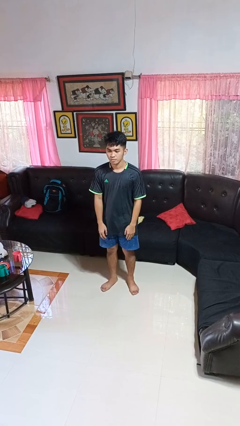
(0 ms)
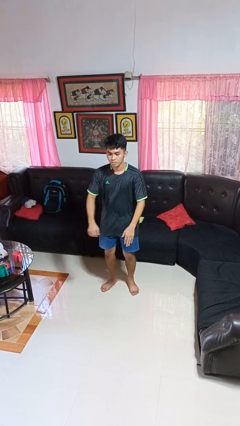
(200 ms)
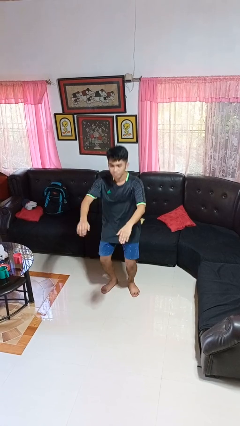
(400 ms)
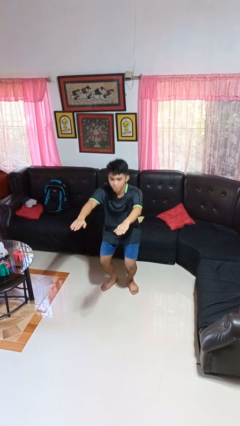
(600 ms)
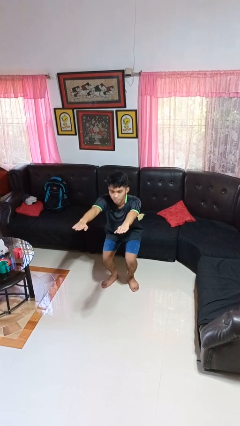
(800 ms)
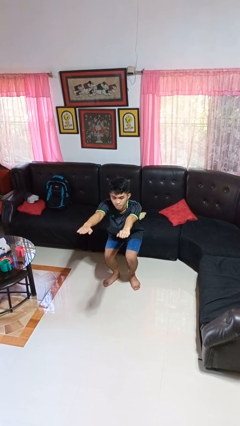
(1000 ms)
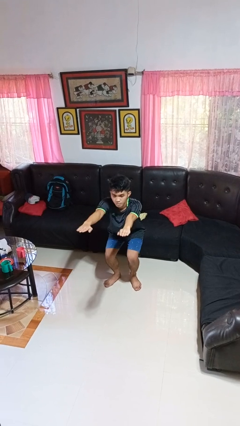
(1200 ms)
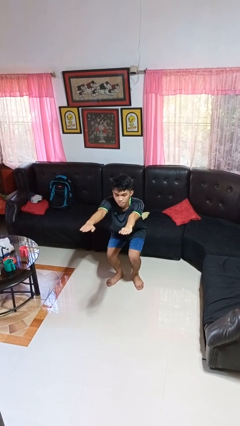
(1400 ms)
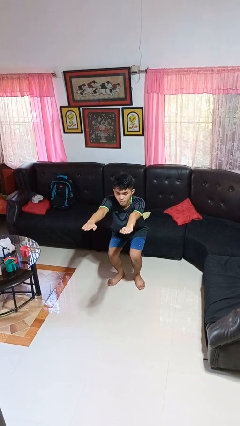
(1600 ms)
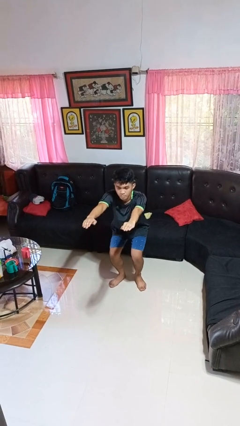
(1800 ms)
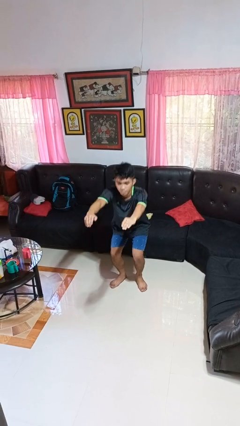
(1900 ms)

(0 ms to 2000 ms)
person squats

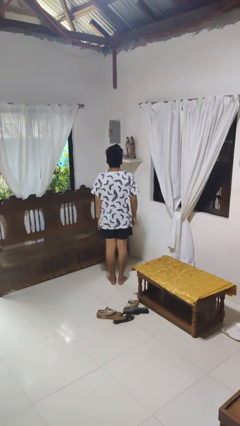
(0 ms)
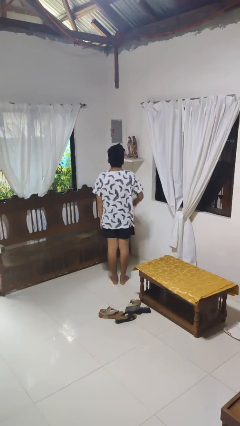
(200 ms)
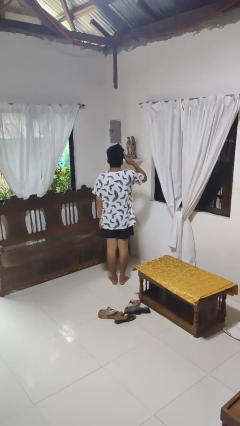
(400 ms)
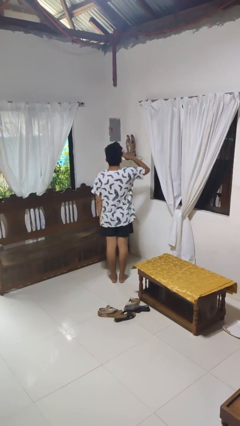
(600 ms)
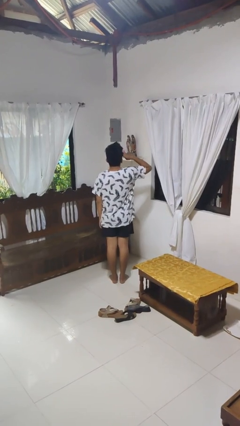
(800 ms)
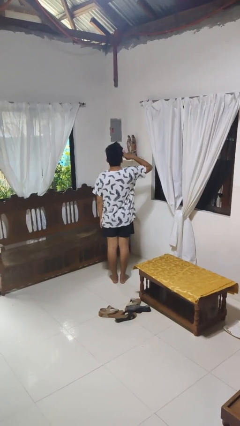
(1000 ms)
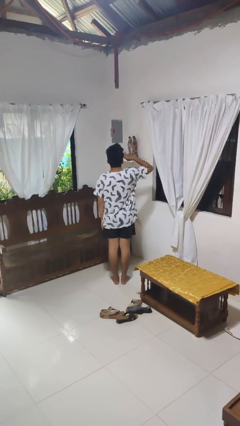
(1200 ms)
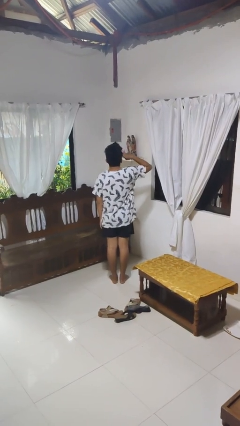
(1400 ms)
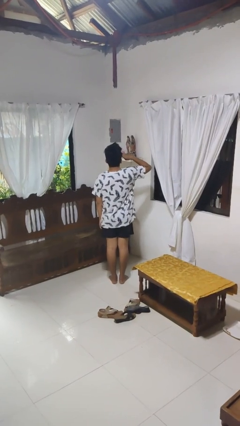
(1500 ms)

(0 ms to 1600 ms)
person salutes

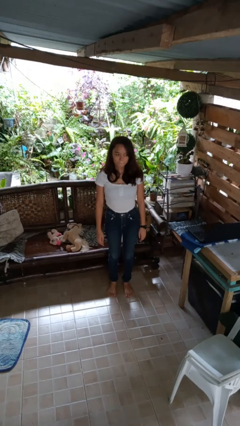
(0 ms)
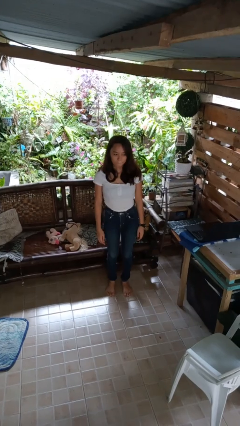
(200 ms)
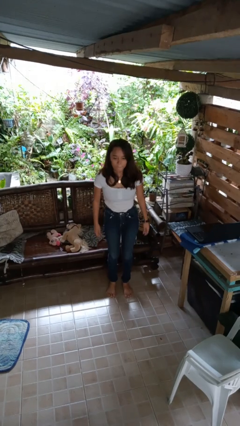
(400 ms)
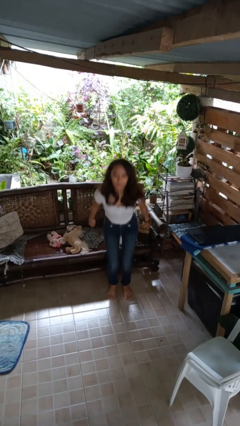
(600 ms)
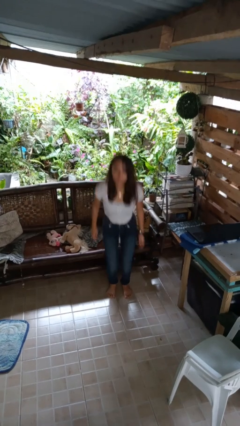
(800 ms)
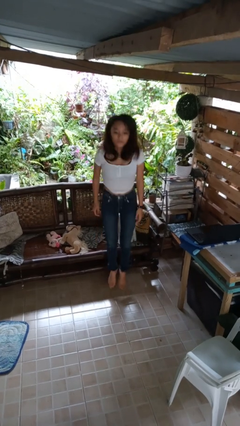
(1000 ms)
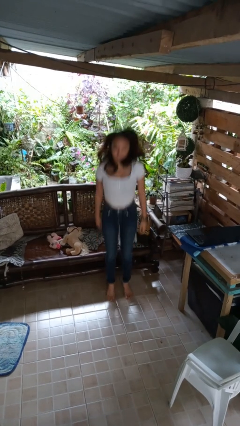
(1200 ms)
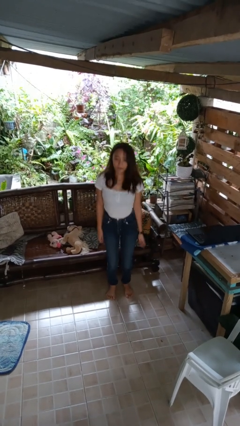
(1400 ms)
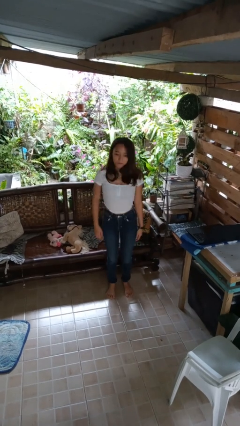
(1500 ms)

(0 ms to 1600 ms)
person jumps

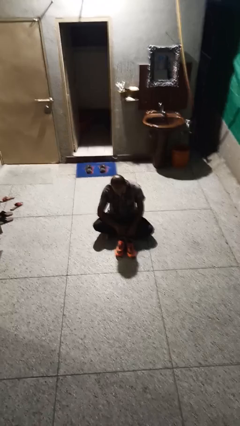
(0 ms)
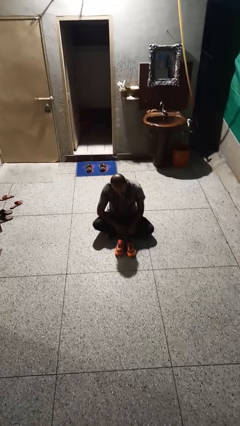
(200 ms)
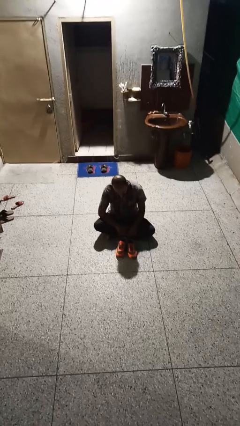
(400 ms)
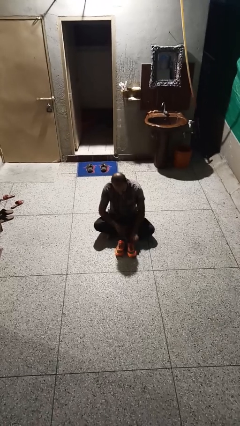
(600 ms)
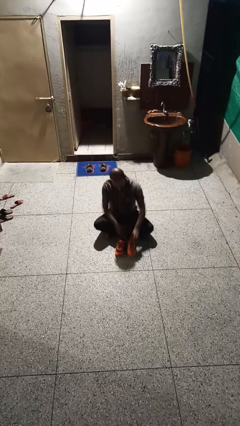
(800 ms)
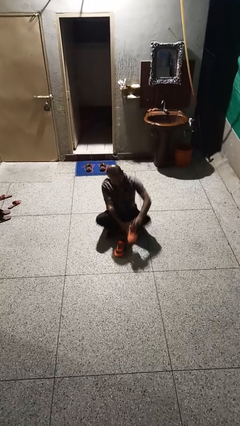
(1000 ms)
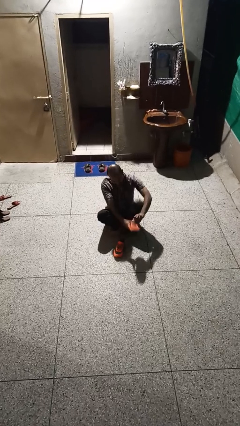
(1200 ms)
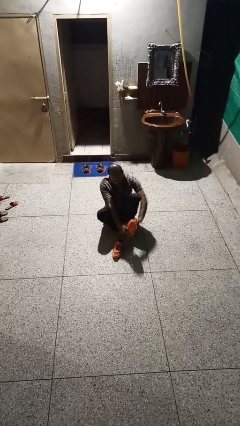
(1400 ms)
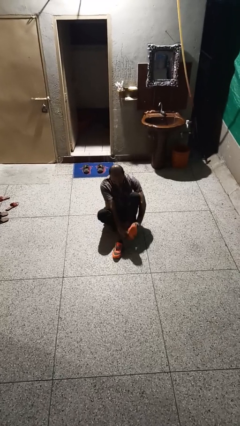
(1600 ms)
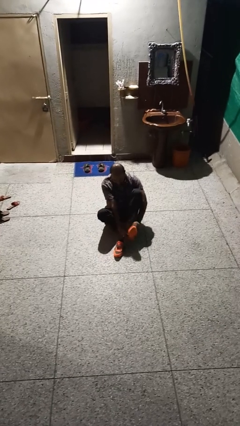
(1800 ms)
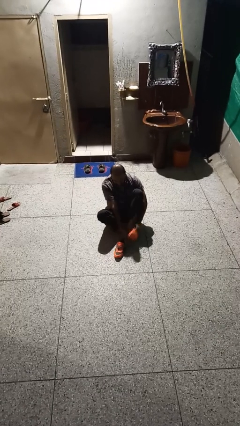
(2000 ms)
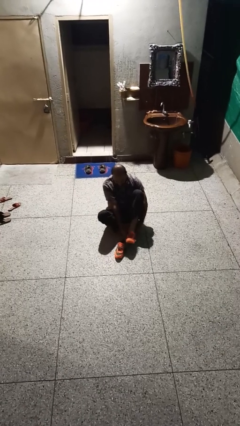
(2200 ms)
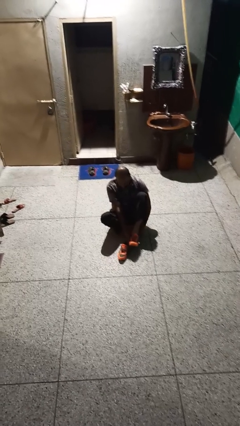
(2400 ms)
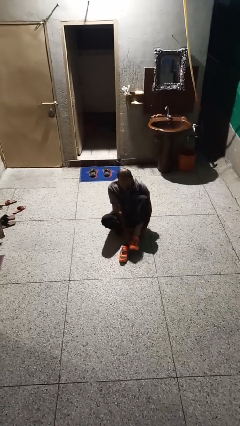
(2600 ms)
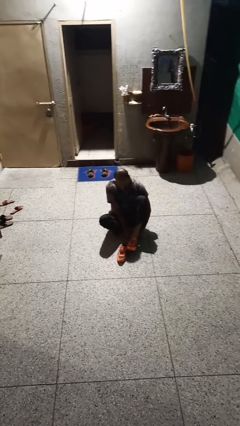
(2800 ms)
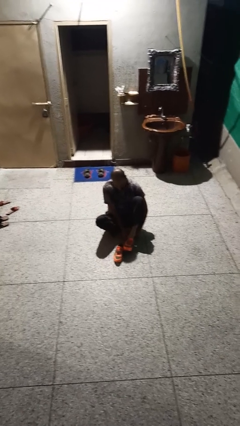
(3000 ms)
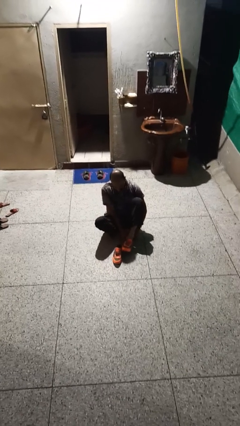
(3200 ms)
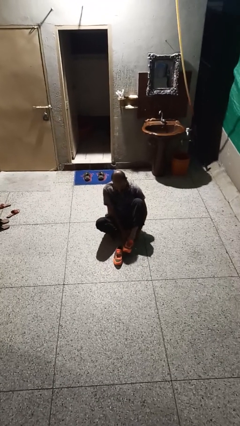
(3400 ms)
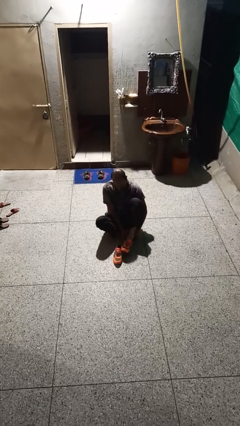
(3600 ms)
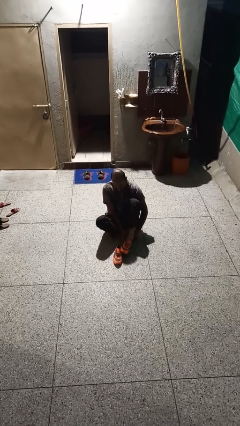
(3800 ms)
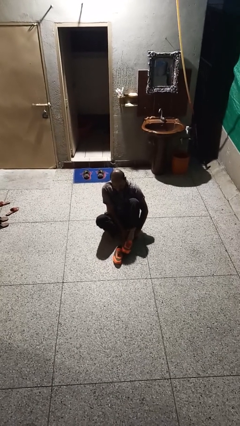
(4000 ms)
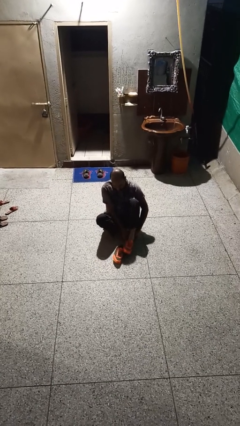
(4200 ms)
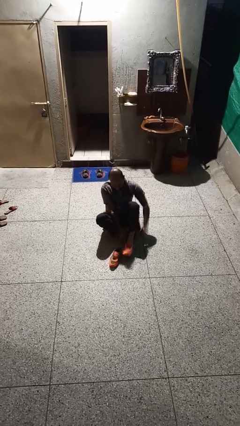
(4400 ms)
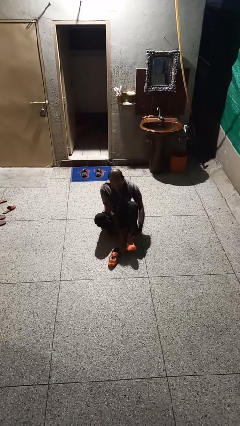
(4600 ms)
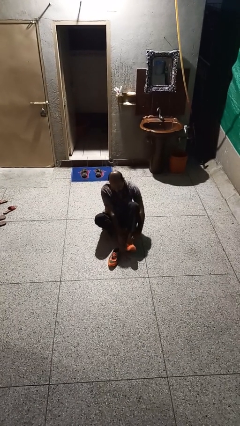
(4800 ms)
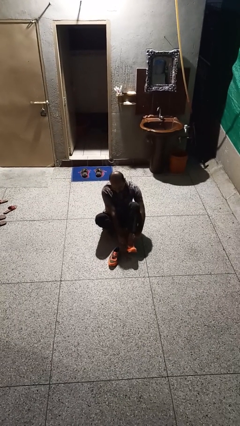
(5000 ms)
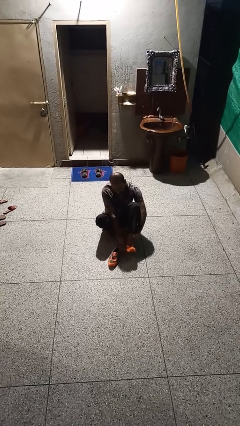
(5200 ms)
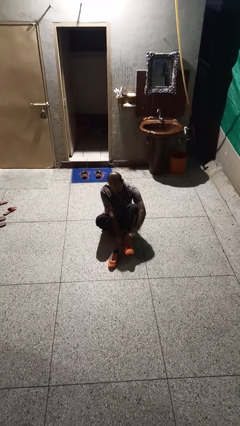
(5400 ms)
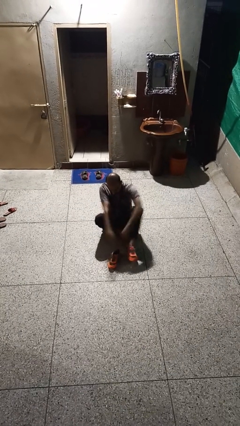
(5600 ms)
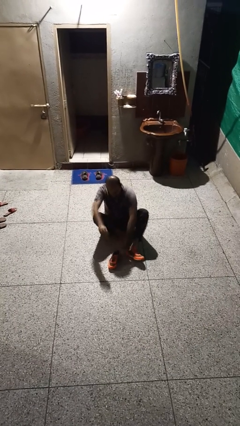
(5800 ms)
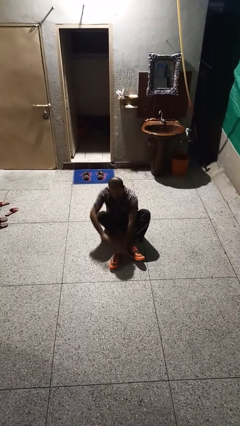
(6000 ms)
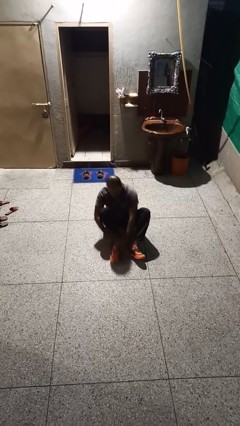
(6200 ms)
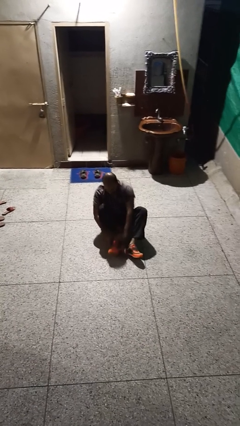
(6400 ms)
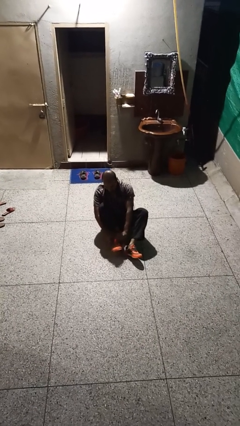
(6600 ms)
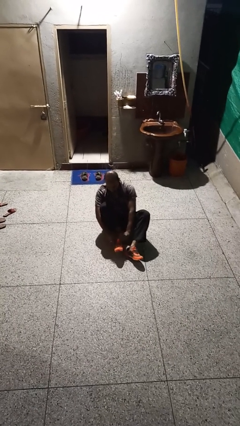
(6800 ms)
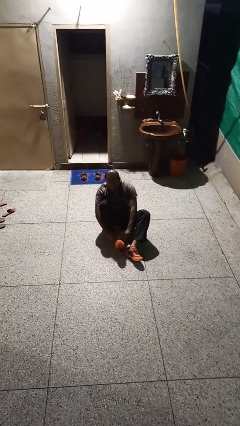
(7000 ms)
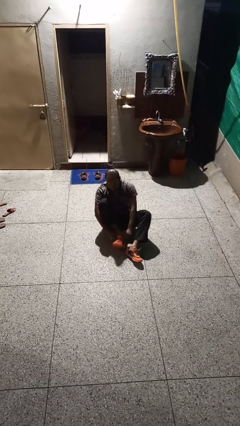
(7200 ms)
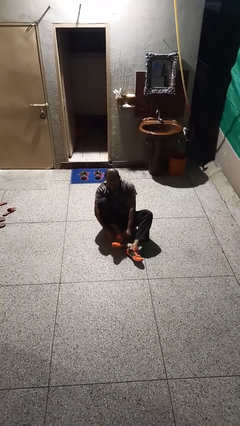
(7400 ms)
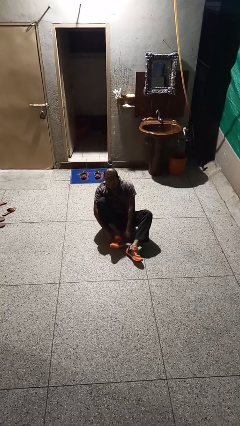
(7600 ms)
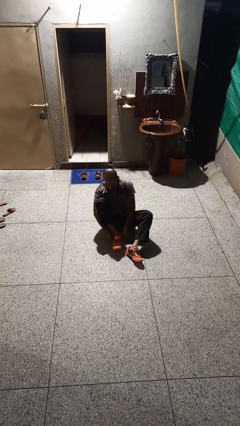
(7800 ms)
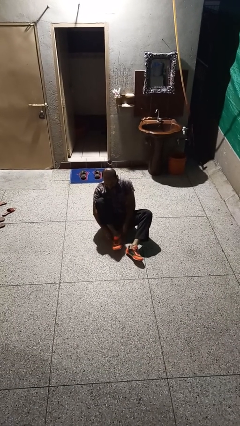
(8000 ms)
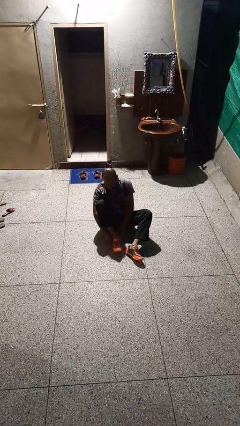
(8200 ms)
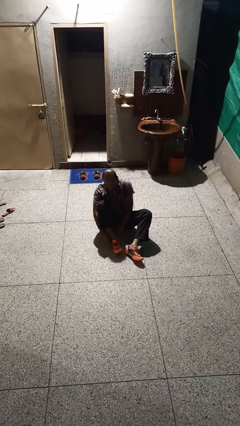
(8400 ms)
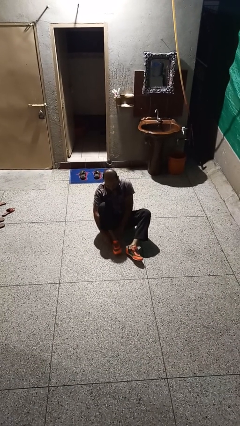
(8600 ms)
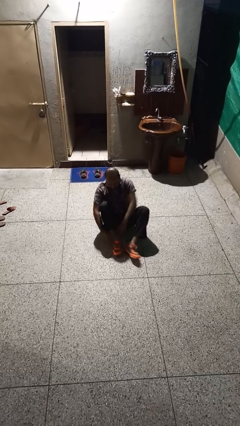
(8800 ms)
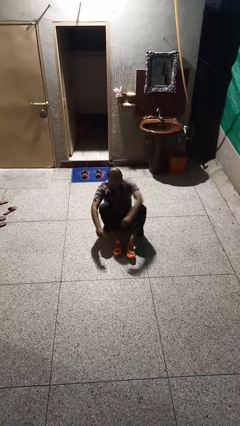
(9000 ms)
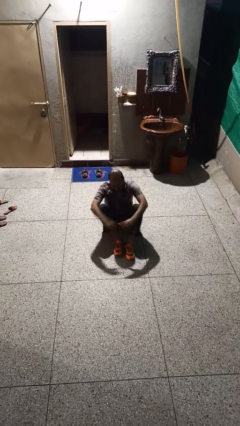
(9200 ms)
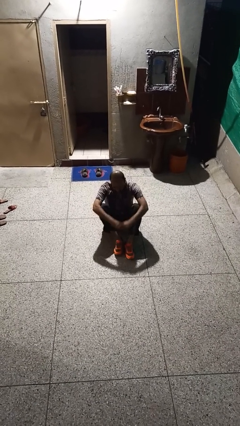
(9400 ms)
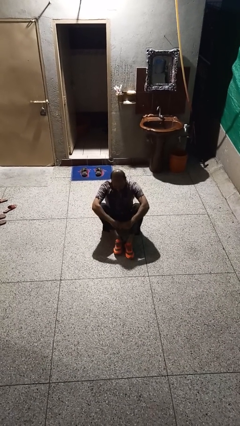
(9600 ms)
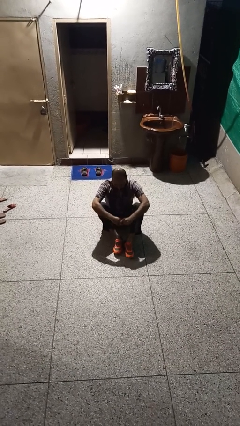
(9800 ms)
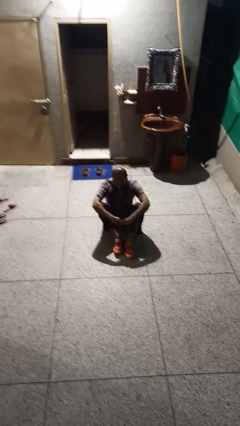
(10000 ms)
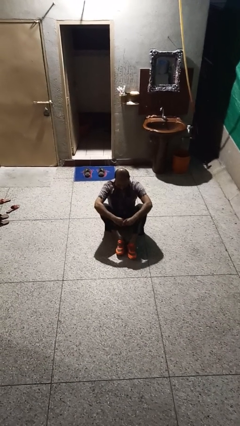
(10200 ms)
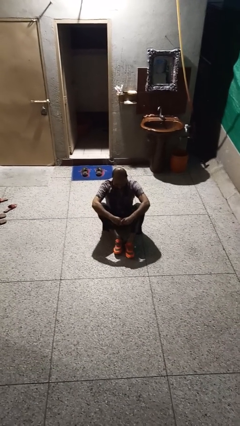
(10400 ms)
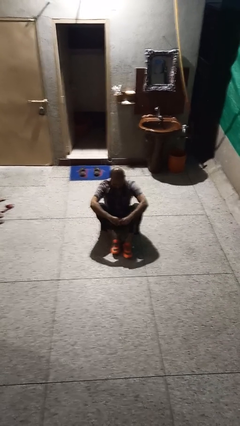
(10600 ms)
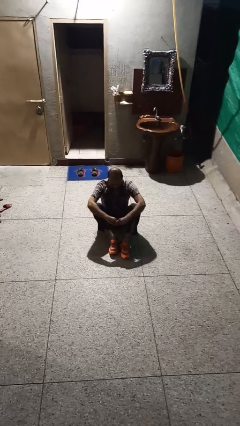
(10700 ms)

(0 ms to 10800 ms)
person puts on shoes

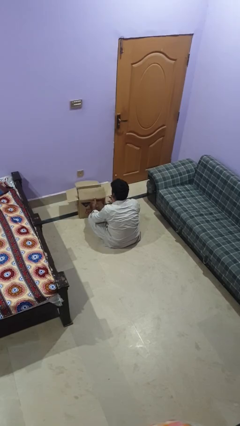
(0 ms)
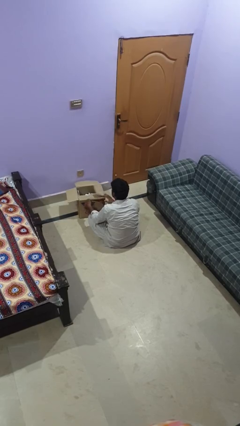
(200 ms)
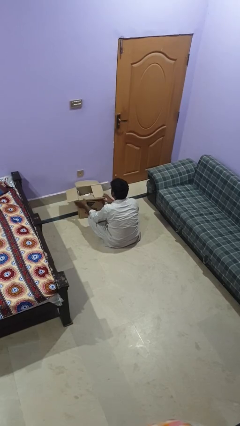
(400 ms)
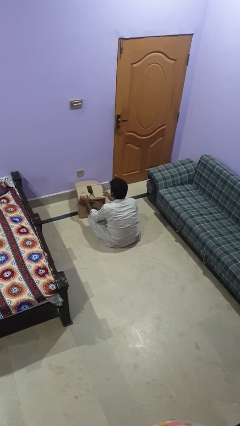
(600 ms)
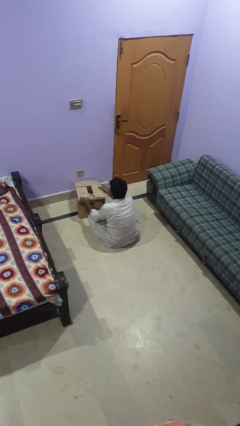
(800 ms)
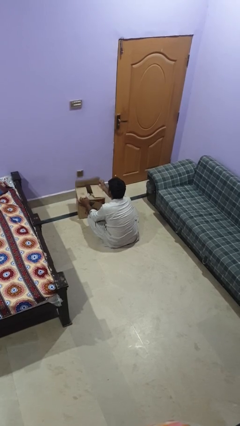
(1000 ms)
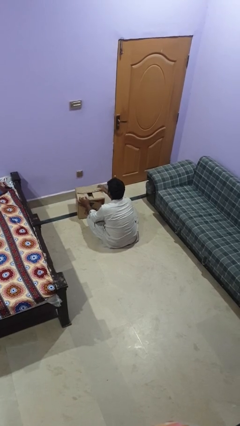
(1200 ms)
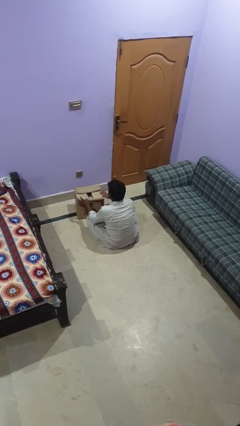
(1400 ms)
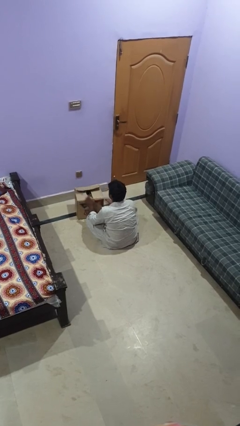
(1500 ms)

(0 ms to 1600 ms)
person closes box
